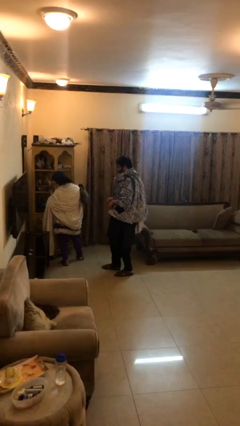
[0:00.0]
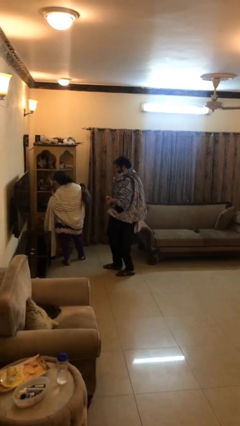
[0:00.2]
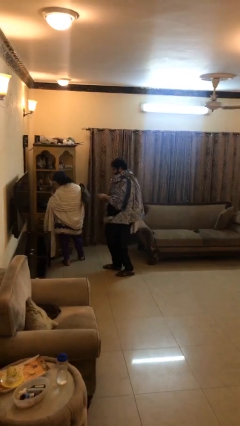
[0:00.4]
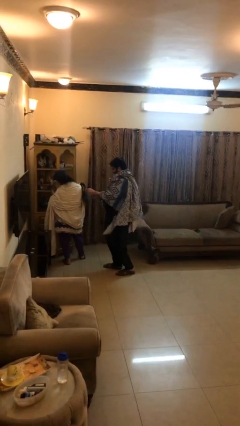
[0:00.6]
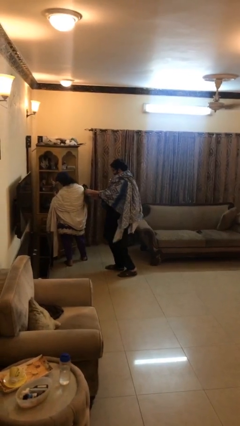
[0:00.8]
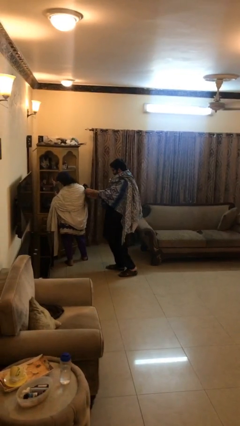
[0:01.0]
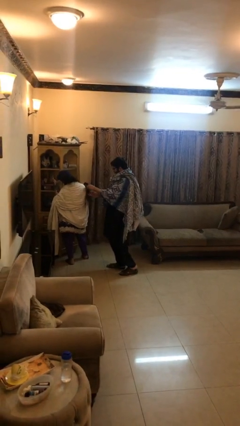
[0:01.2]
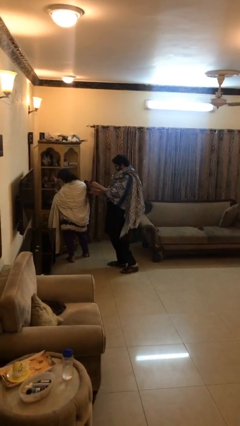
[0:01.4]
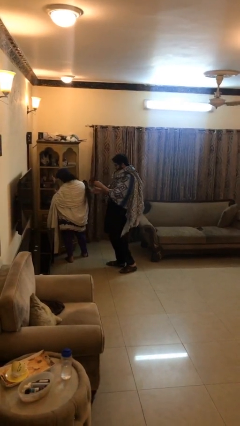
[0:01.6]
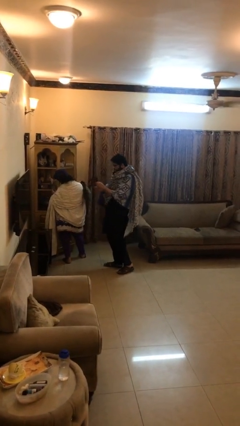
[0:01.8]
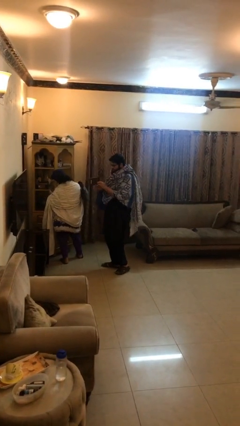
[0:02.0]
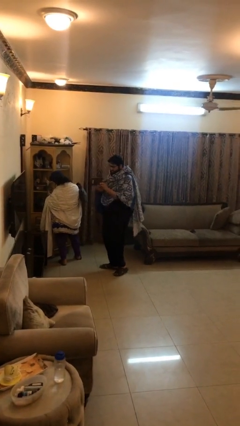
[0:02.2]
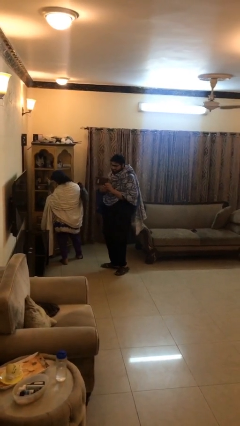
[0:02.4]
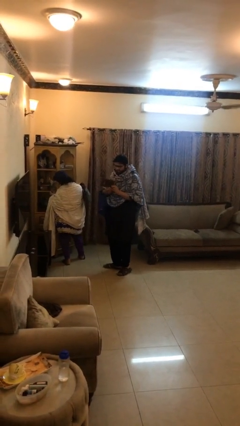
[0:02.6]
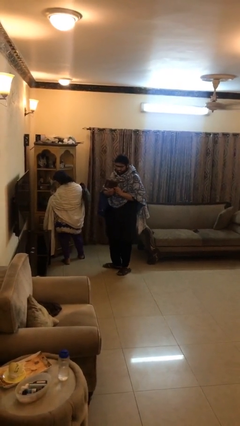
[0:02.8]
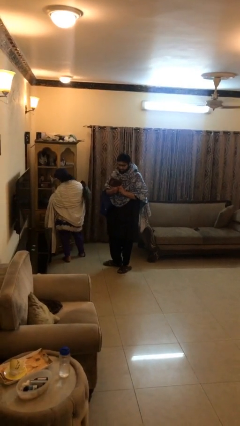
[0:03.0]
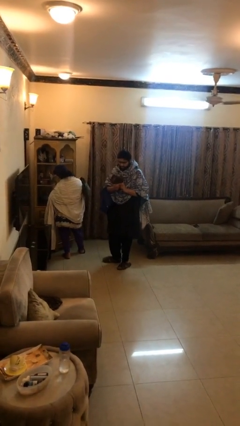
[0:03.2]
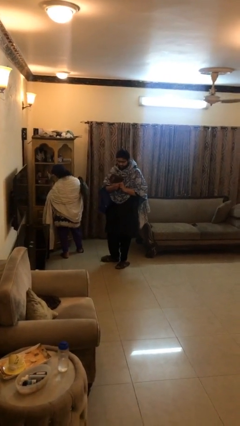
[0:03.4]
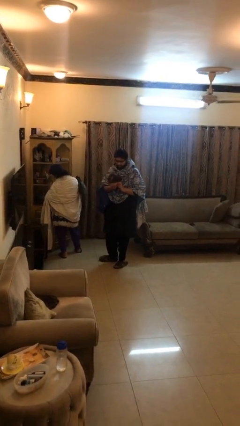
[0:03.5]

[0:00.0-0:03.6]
person steals object from person

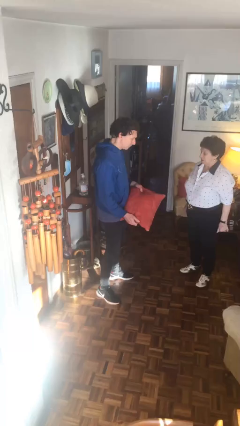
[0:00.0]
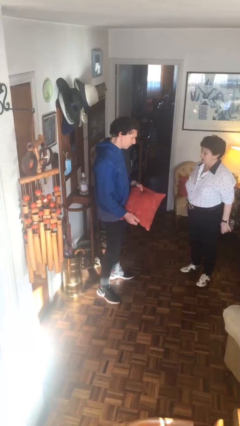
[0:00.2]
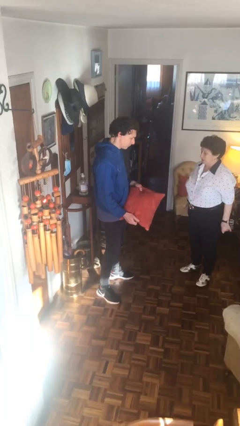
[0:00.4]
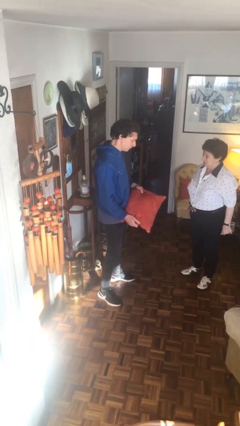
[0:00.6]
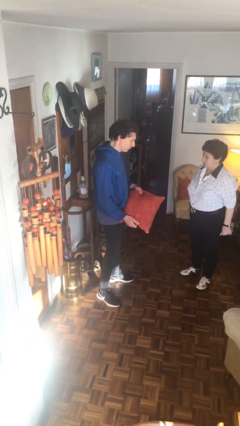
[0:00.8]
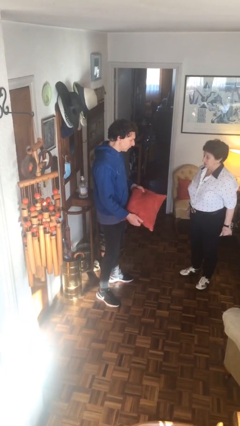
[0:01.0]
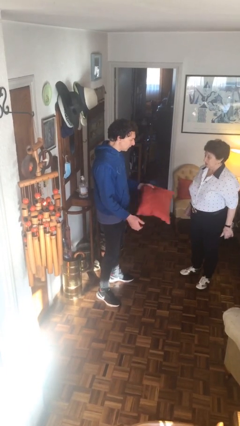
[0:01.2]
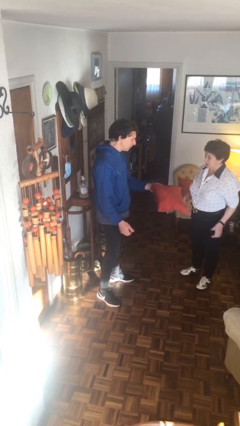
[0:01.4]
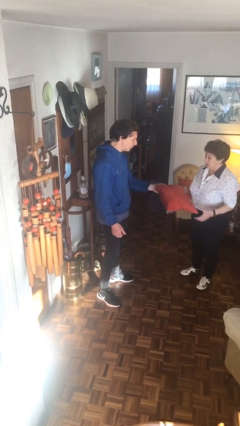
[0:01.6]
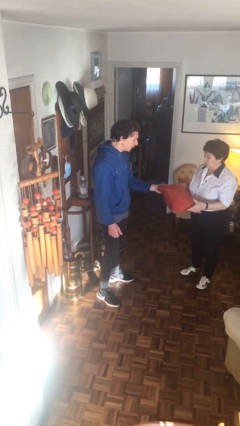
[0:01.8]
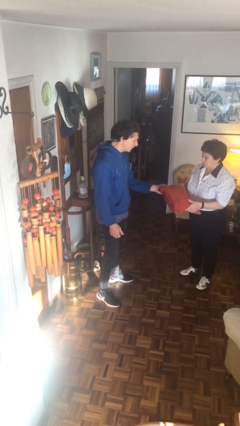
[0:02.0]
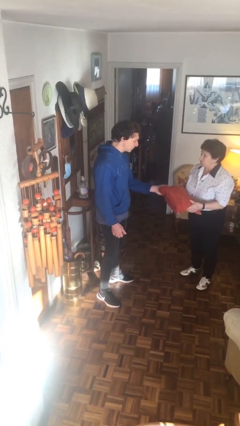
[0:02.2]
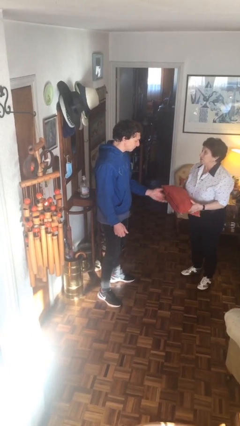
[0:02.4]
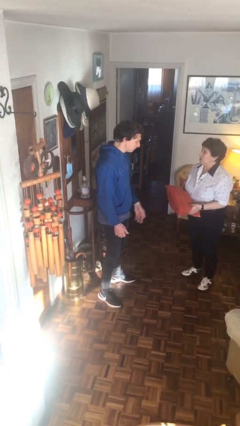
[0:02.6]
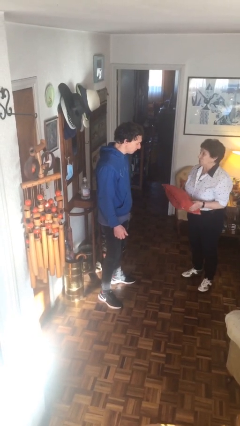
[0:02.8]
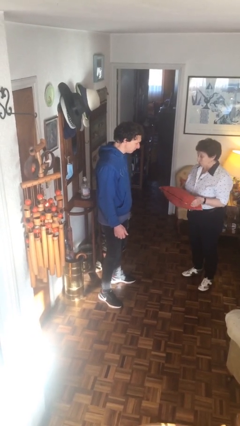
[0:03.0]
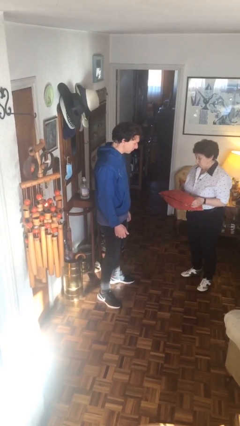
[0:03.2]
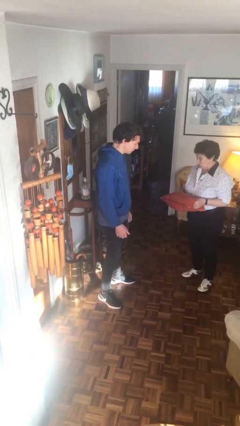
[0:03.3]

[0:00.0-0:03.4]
person transfers object to person

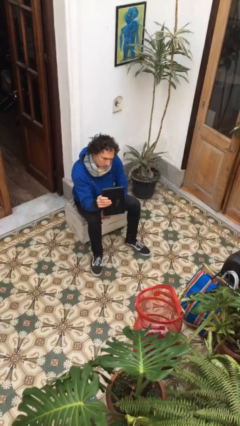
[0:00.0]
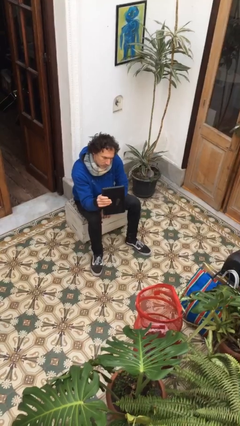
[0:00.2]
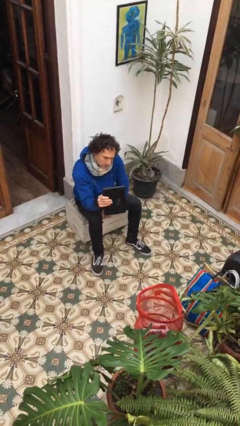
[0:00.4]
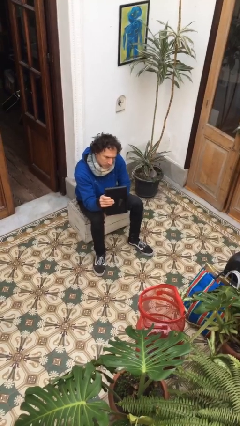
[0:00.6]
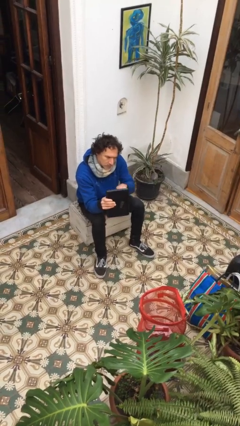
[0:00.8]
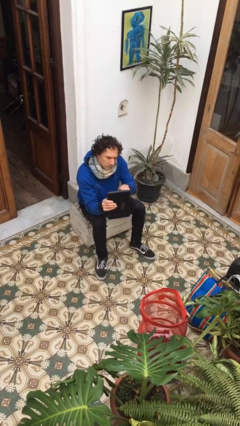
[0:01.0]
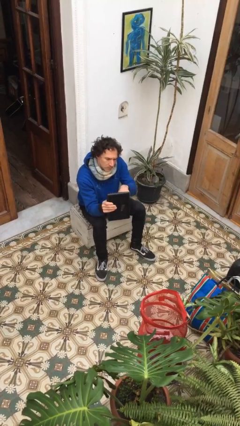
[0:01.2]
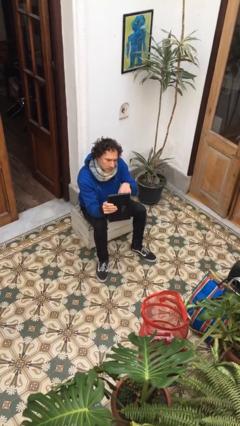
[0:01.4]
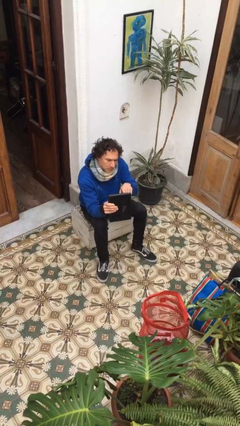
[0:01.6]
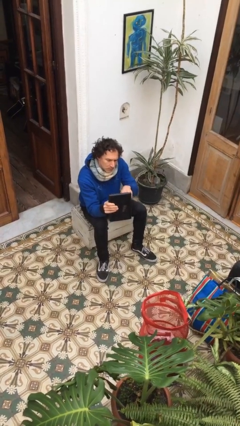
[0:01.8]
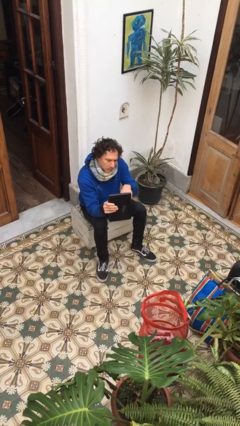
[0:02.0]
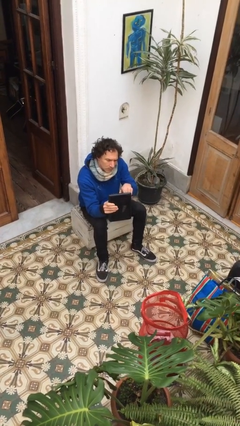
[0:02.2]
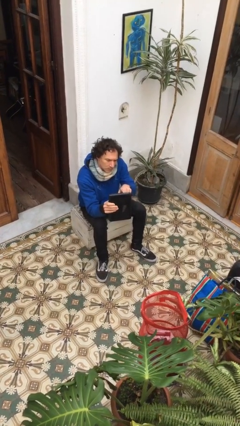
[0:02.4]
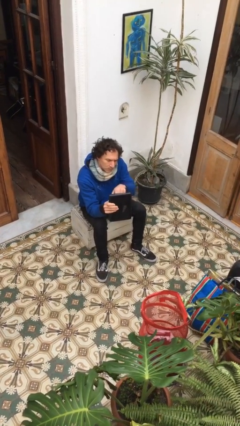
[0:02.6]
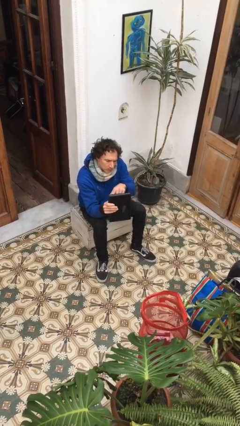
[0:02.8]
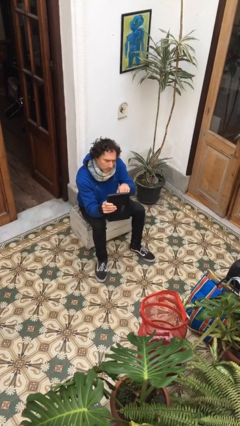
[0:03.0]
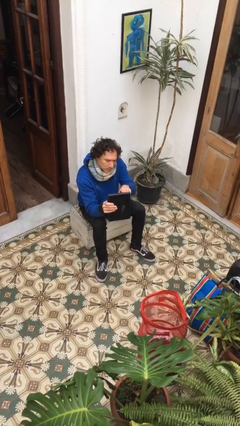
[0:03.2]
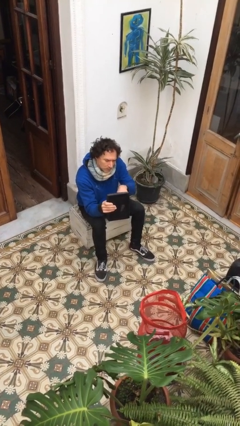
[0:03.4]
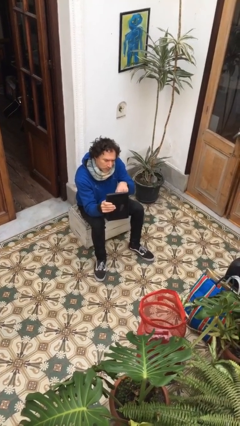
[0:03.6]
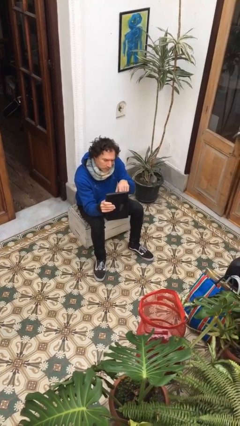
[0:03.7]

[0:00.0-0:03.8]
person interacts with tablet

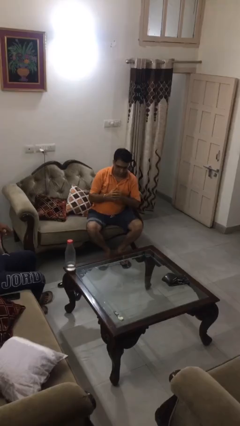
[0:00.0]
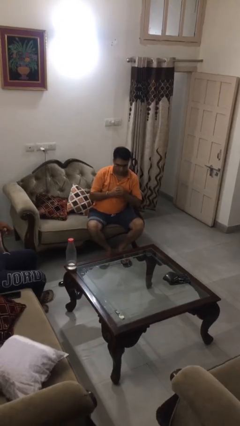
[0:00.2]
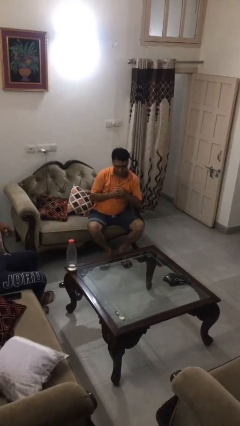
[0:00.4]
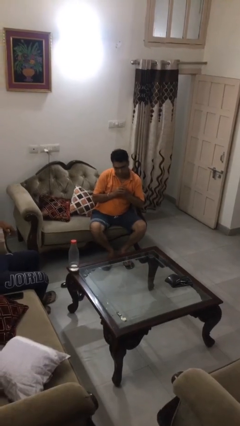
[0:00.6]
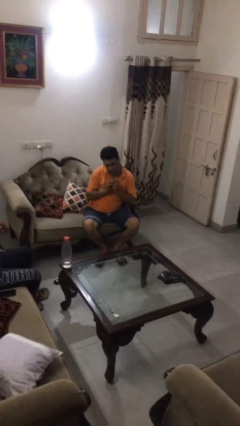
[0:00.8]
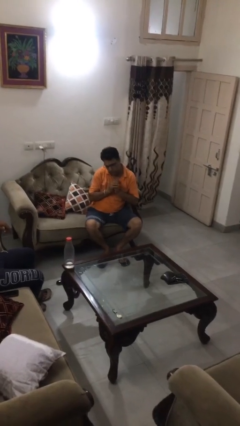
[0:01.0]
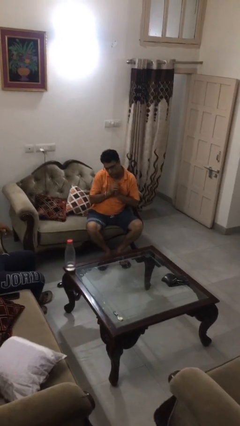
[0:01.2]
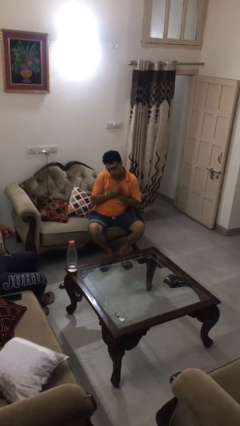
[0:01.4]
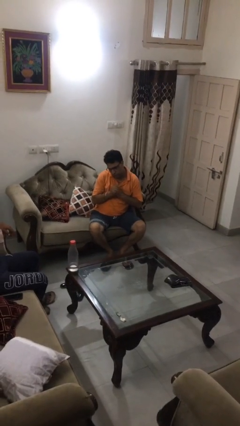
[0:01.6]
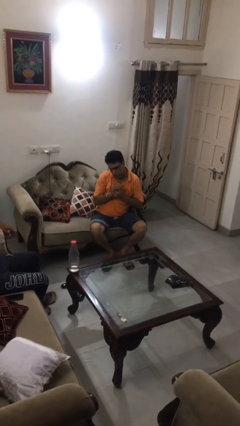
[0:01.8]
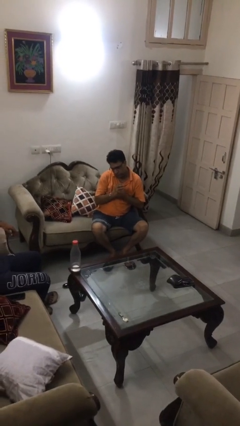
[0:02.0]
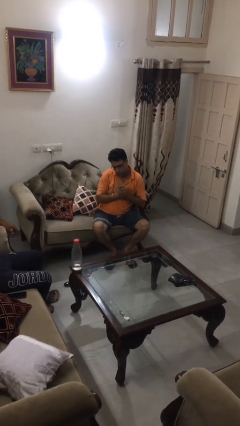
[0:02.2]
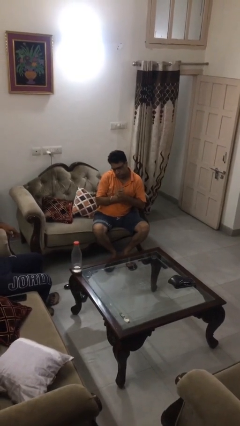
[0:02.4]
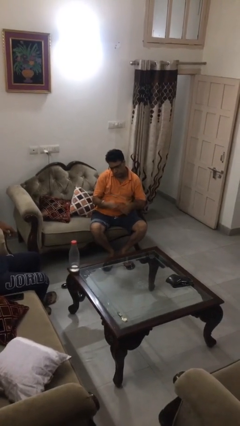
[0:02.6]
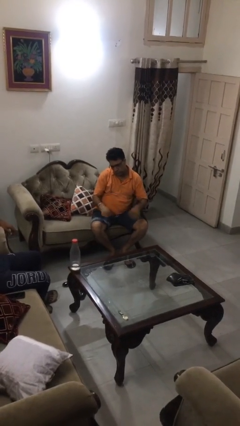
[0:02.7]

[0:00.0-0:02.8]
person cracks knuckles

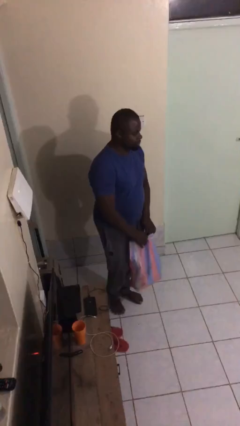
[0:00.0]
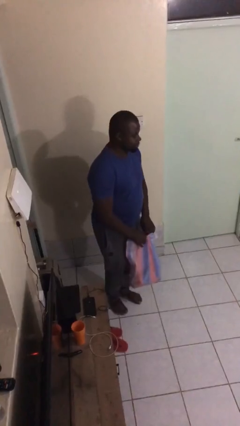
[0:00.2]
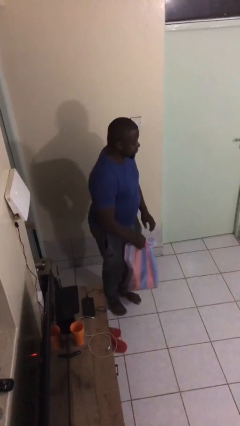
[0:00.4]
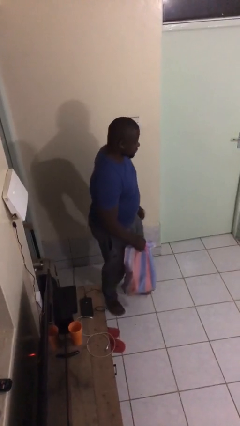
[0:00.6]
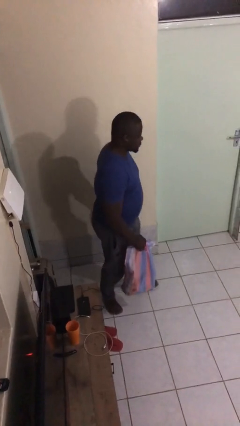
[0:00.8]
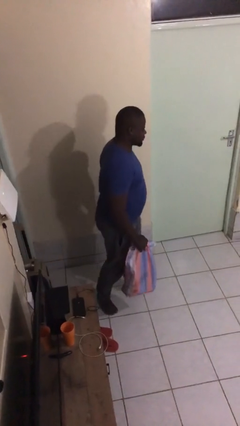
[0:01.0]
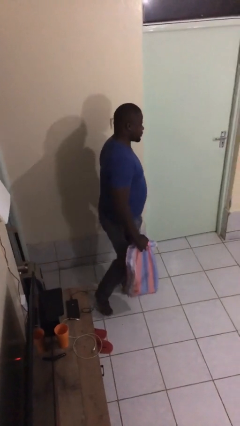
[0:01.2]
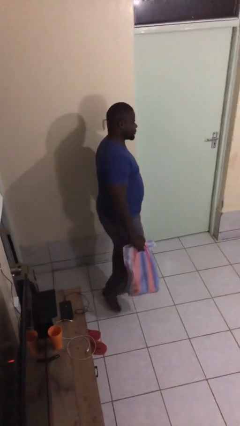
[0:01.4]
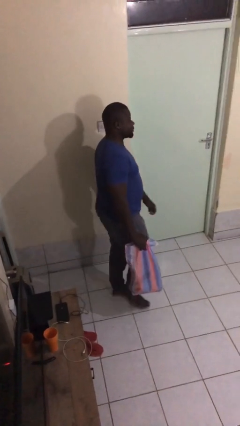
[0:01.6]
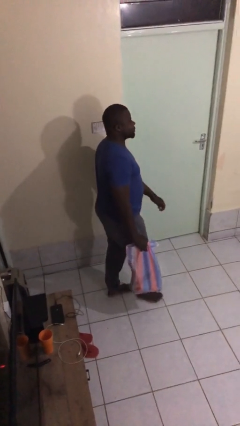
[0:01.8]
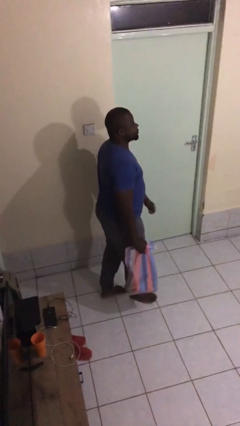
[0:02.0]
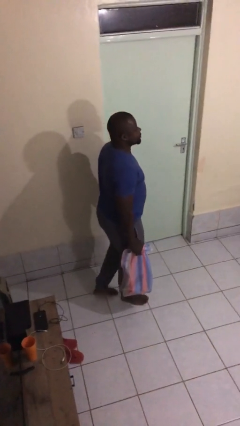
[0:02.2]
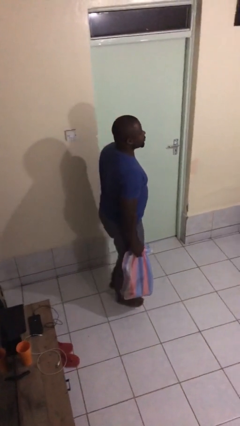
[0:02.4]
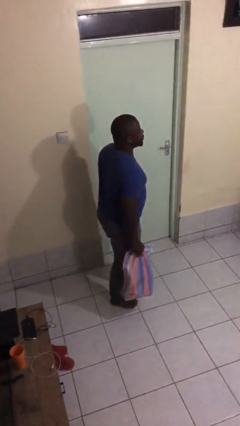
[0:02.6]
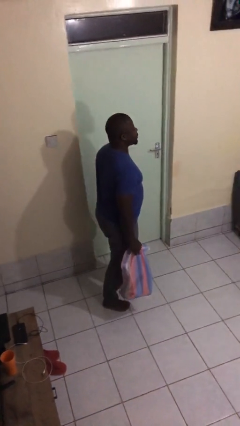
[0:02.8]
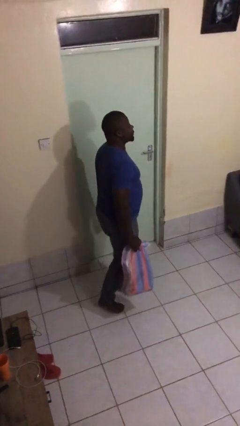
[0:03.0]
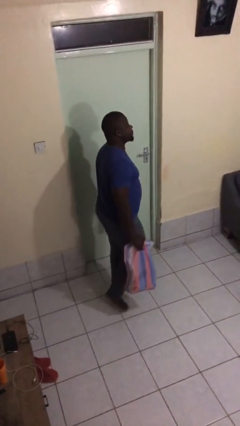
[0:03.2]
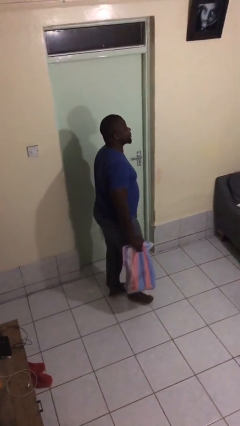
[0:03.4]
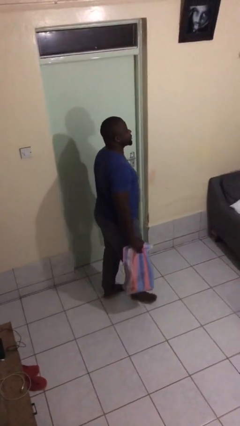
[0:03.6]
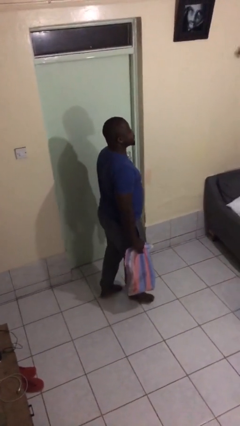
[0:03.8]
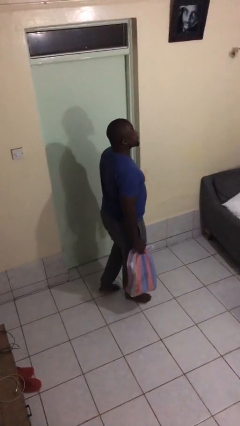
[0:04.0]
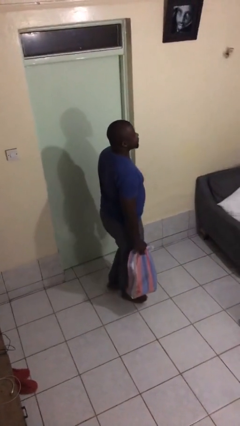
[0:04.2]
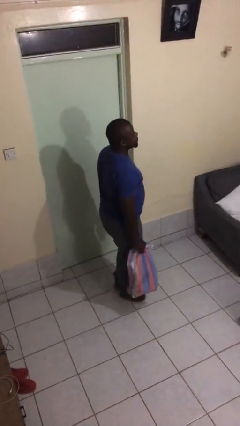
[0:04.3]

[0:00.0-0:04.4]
person carries groceries
